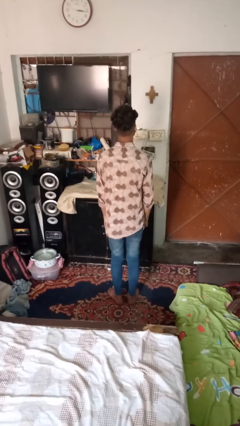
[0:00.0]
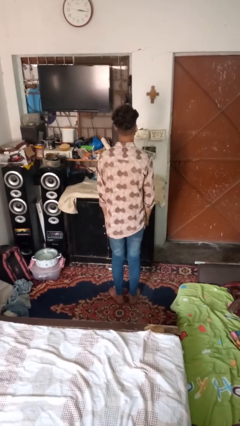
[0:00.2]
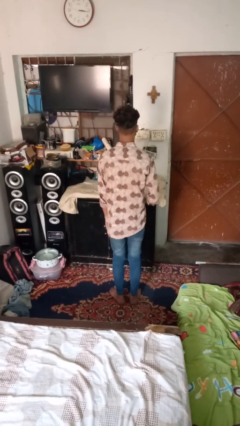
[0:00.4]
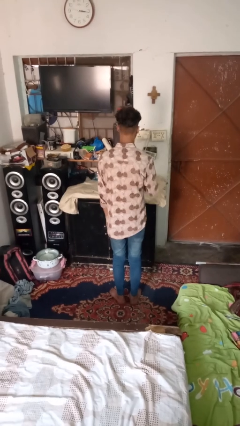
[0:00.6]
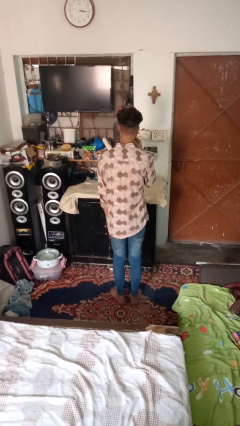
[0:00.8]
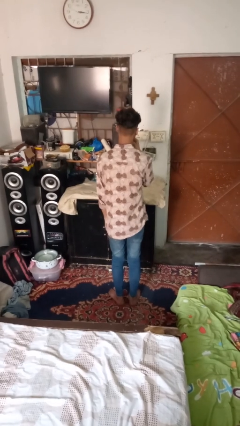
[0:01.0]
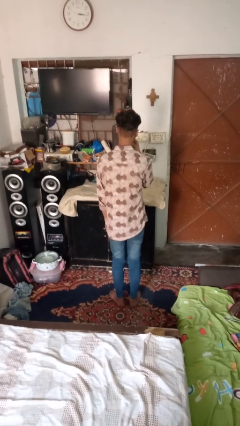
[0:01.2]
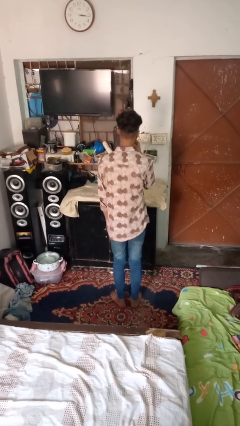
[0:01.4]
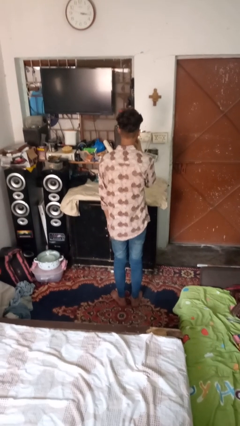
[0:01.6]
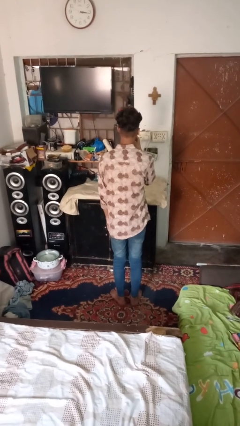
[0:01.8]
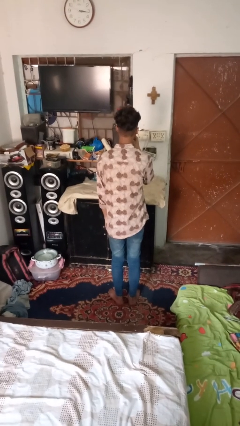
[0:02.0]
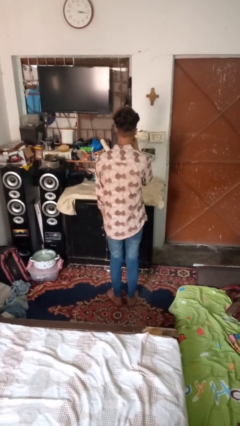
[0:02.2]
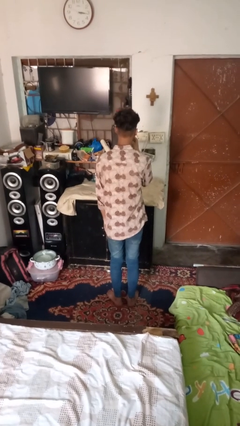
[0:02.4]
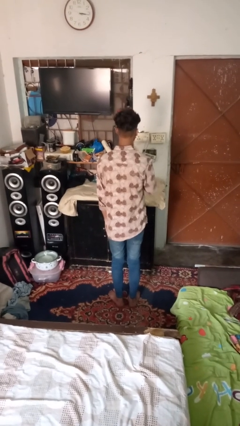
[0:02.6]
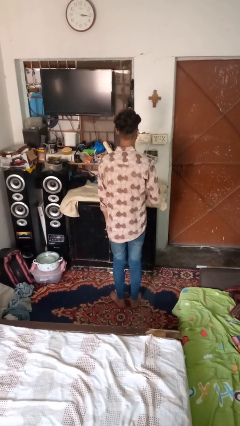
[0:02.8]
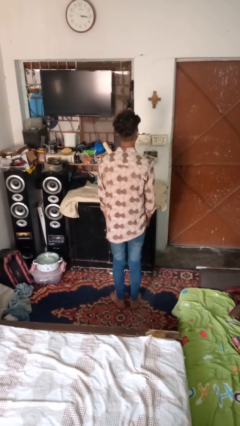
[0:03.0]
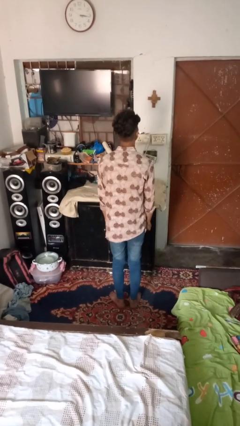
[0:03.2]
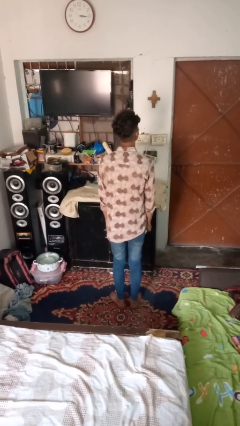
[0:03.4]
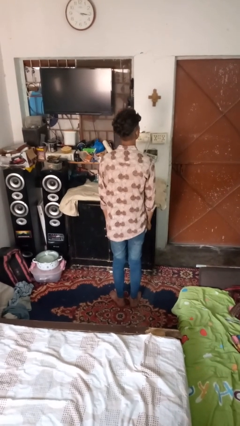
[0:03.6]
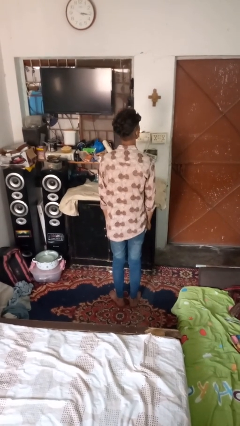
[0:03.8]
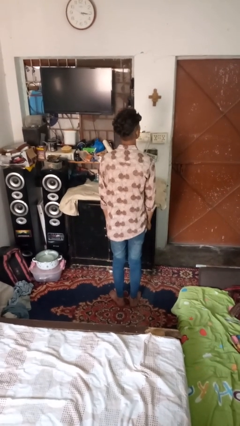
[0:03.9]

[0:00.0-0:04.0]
person vapes

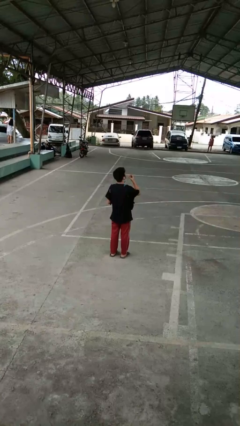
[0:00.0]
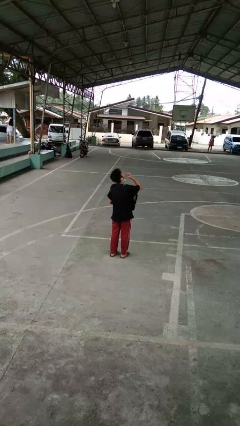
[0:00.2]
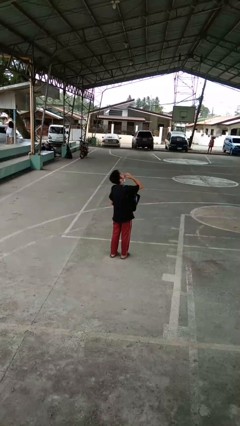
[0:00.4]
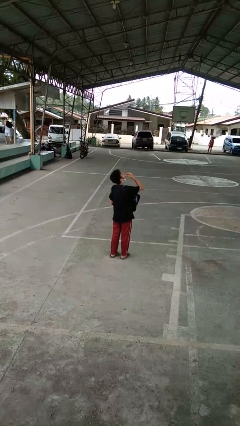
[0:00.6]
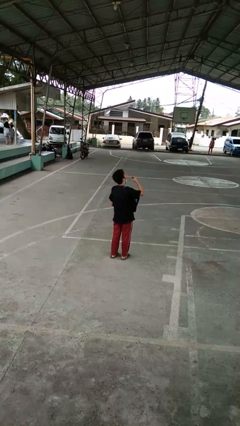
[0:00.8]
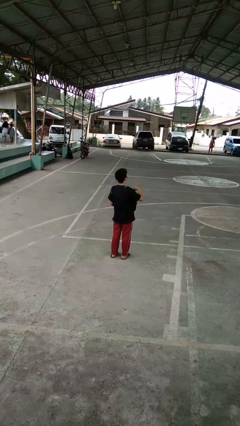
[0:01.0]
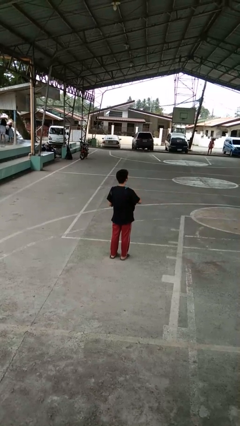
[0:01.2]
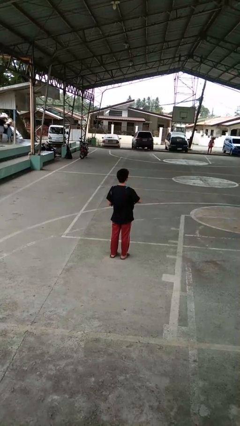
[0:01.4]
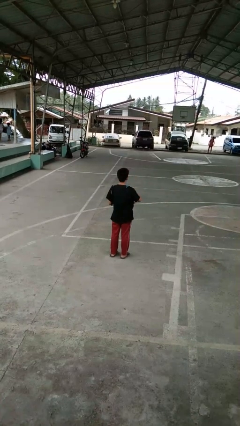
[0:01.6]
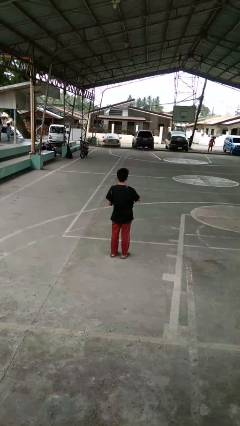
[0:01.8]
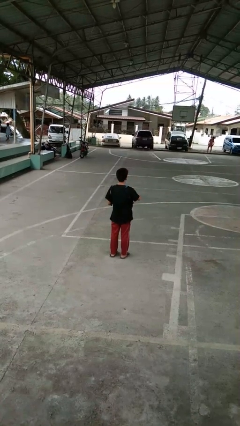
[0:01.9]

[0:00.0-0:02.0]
person eats snack from bag

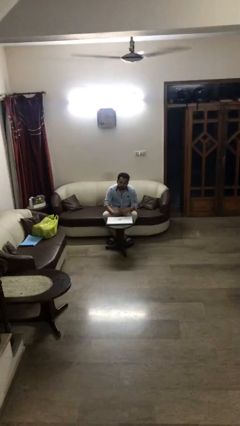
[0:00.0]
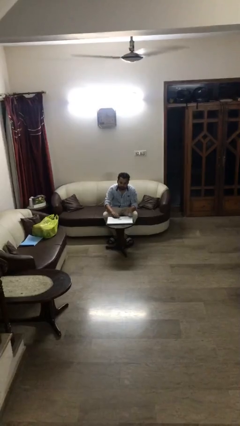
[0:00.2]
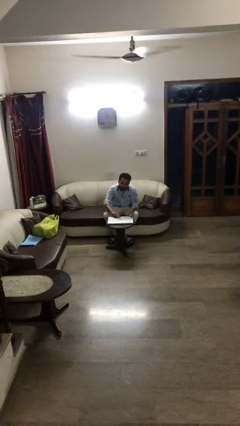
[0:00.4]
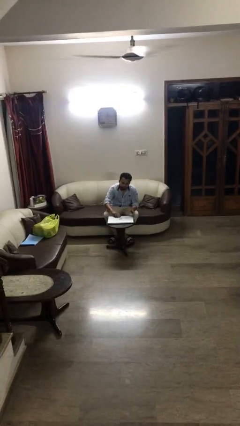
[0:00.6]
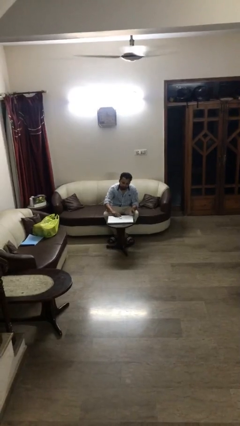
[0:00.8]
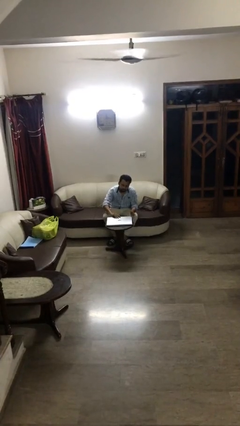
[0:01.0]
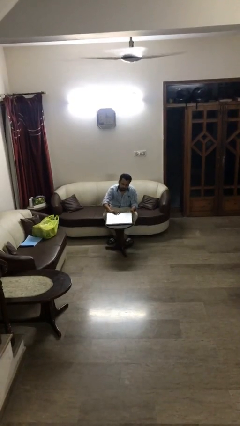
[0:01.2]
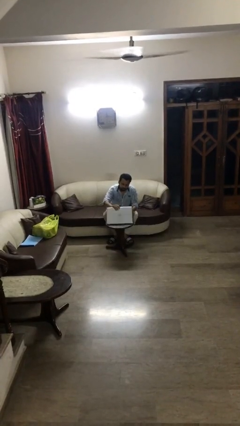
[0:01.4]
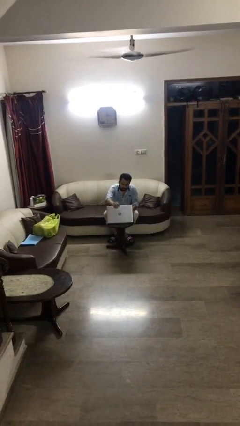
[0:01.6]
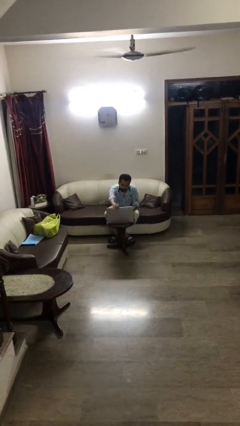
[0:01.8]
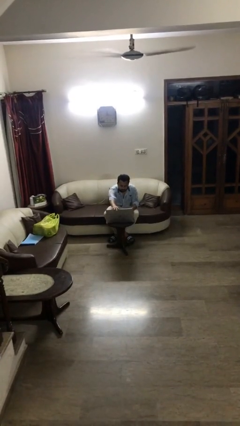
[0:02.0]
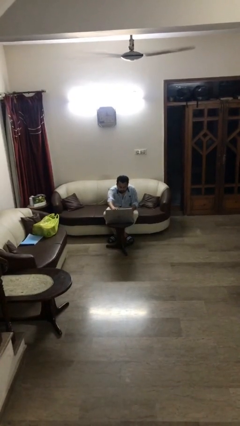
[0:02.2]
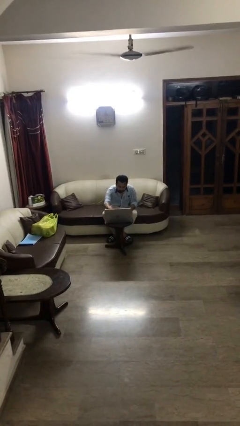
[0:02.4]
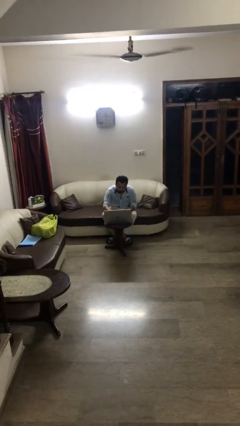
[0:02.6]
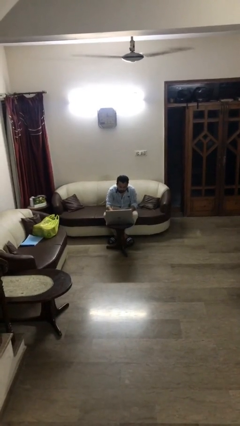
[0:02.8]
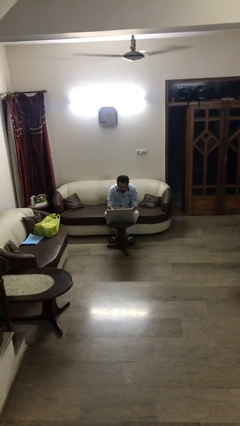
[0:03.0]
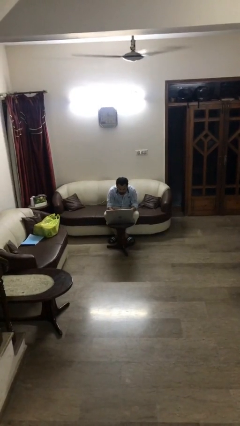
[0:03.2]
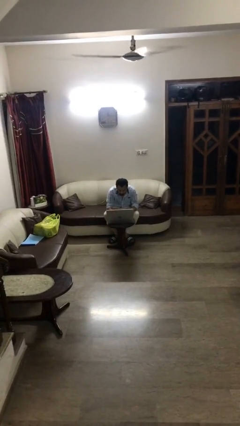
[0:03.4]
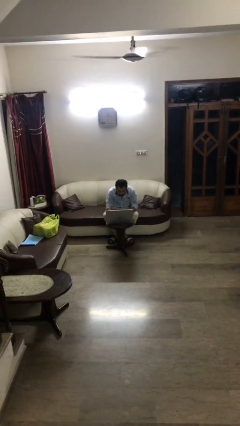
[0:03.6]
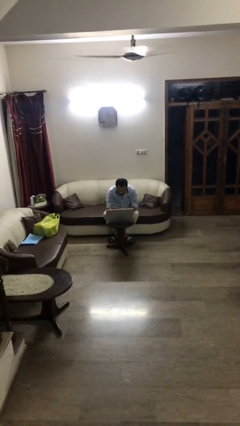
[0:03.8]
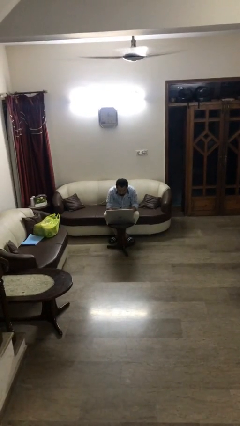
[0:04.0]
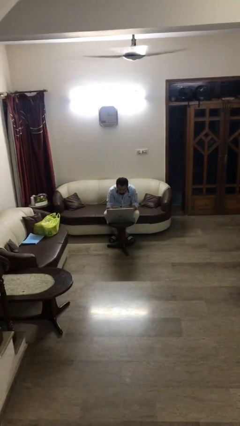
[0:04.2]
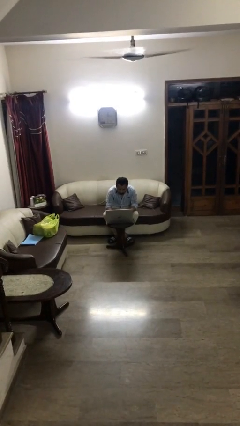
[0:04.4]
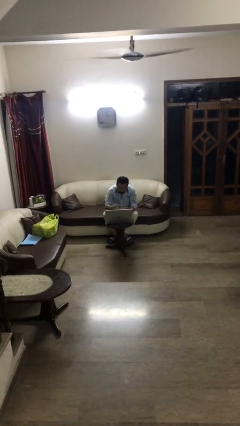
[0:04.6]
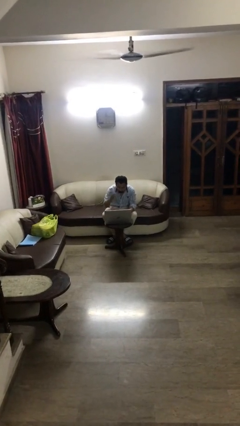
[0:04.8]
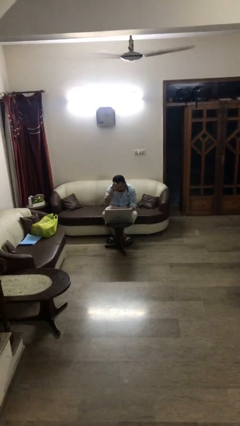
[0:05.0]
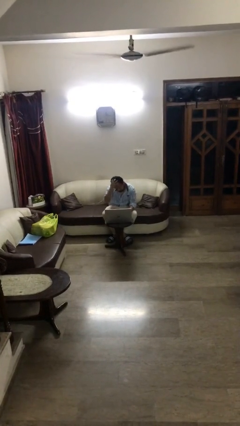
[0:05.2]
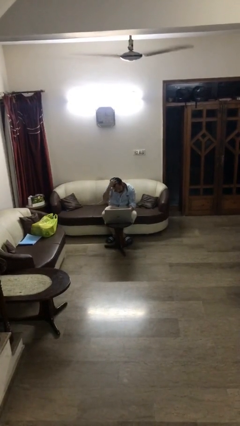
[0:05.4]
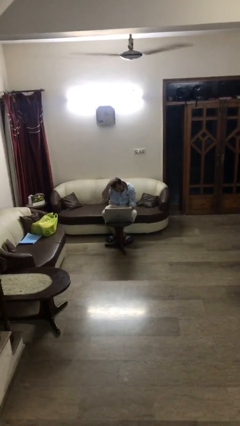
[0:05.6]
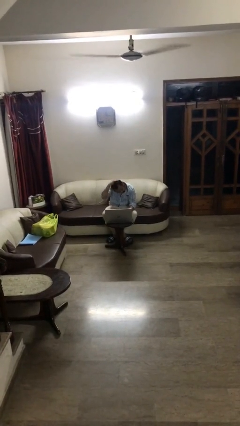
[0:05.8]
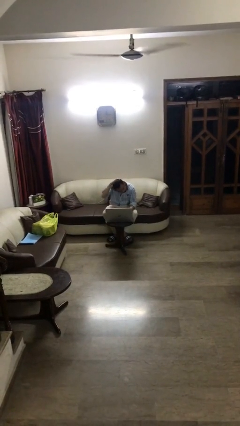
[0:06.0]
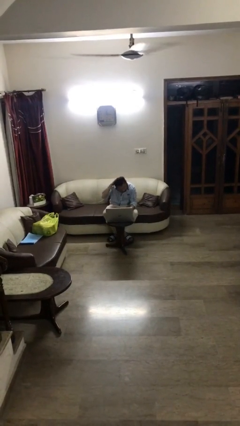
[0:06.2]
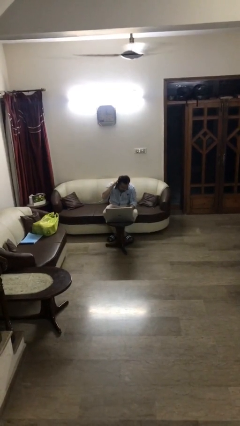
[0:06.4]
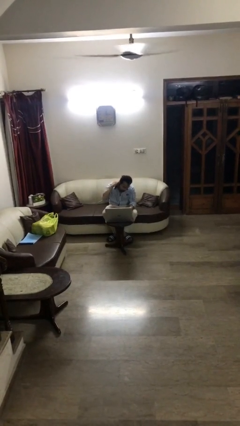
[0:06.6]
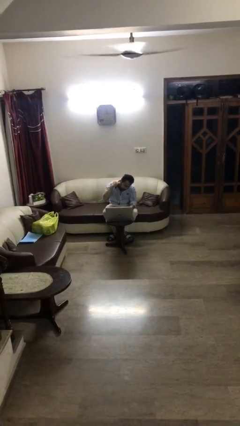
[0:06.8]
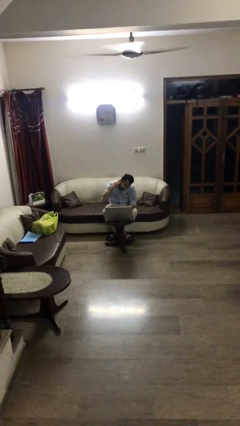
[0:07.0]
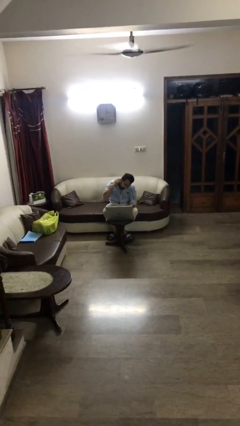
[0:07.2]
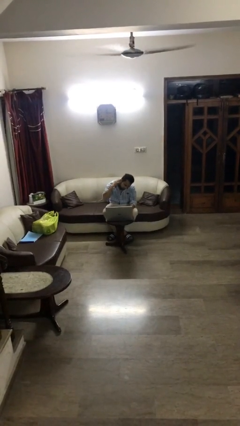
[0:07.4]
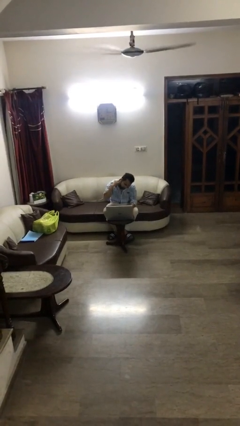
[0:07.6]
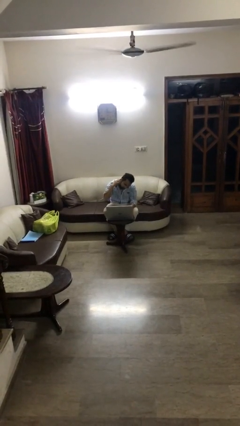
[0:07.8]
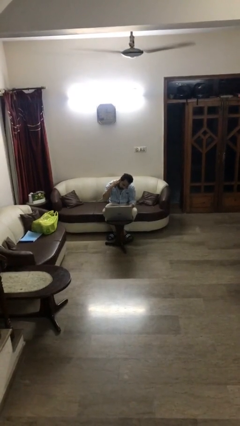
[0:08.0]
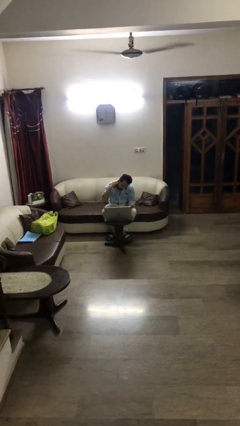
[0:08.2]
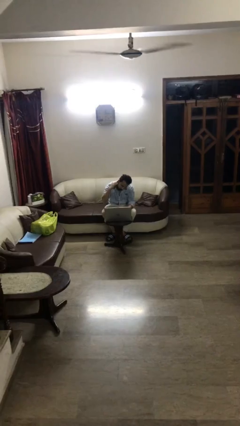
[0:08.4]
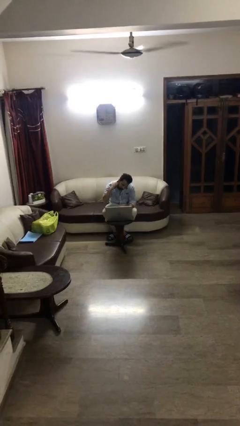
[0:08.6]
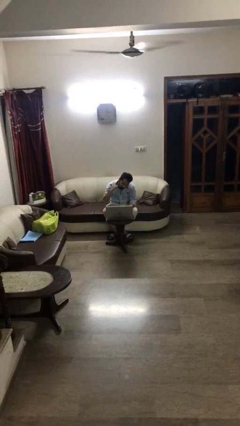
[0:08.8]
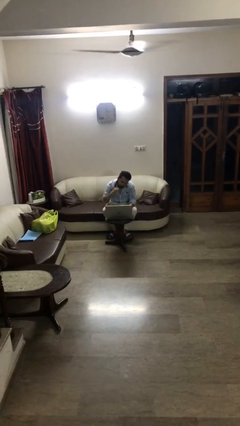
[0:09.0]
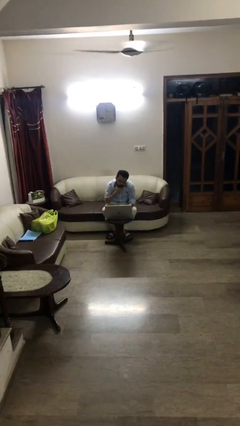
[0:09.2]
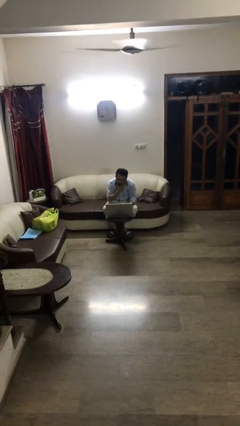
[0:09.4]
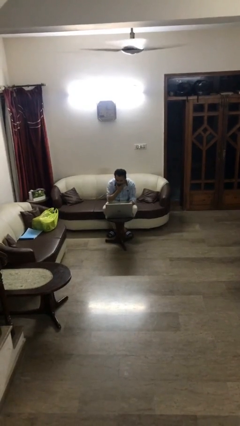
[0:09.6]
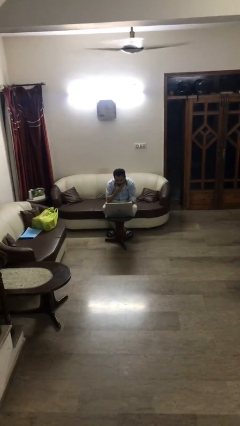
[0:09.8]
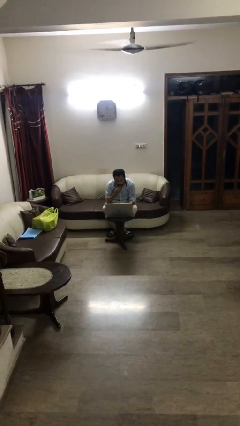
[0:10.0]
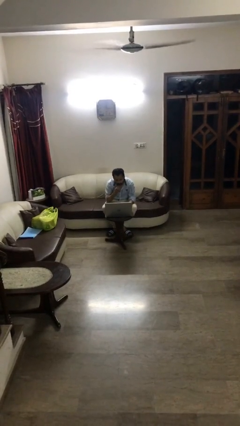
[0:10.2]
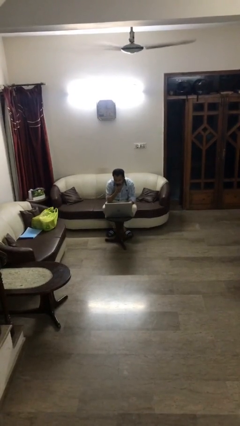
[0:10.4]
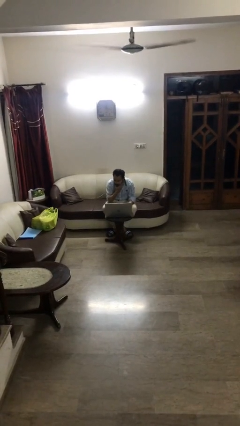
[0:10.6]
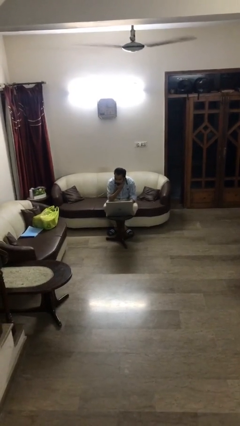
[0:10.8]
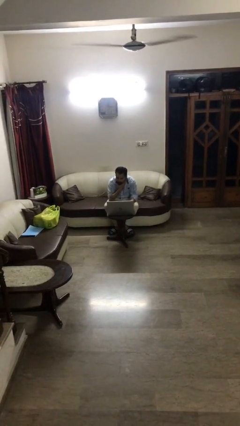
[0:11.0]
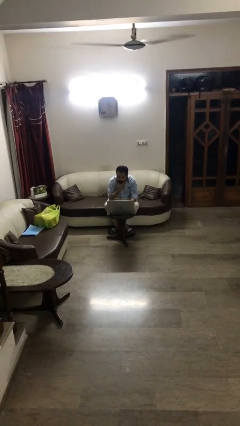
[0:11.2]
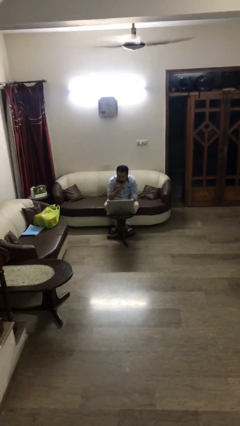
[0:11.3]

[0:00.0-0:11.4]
person interacts with laptop
